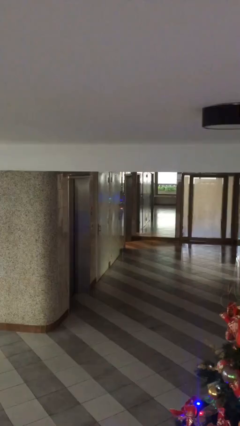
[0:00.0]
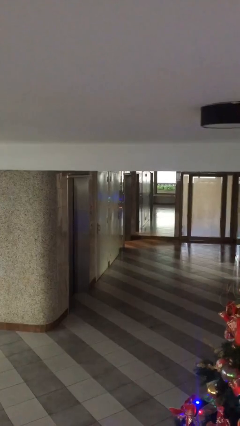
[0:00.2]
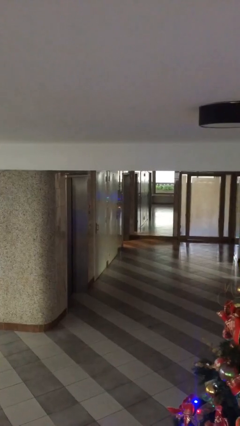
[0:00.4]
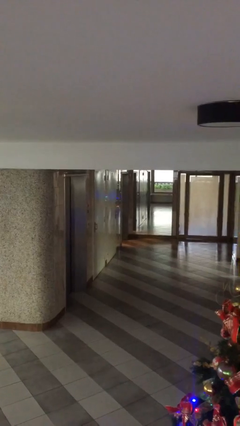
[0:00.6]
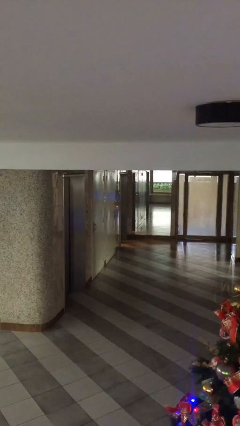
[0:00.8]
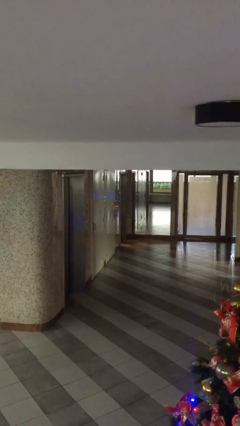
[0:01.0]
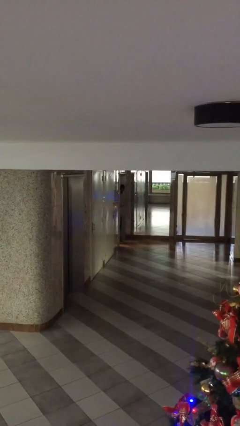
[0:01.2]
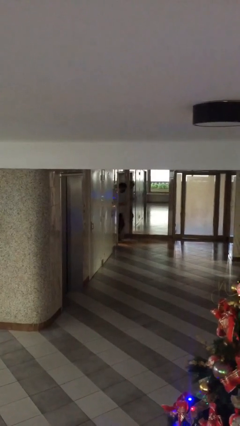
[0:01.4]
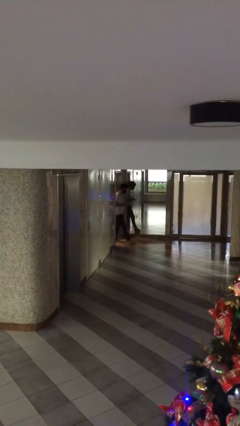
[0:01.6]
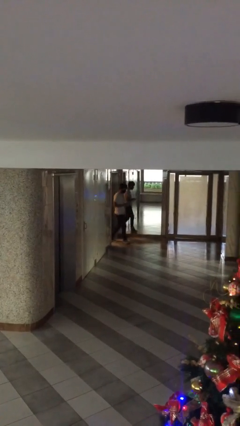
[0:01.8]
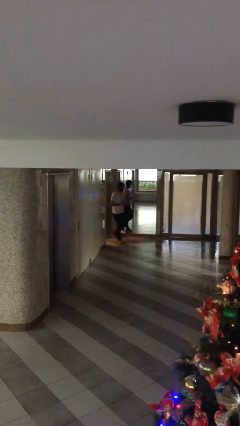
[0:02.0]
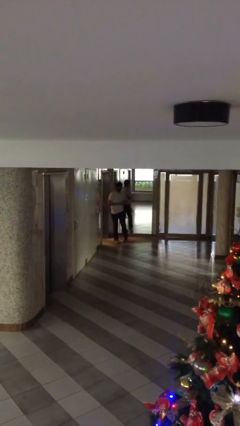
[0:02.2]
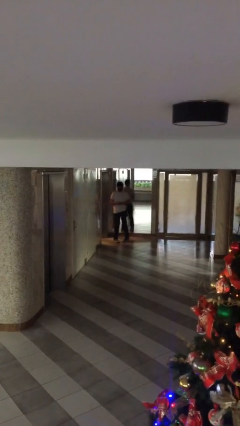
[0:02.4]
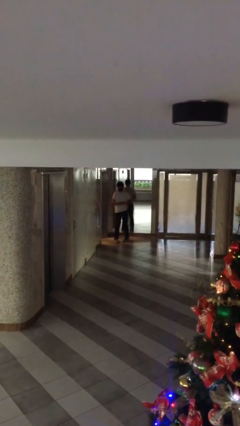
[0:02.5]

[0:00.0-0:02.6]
person enters scene through structure

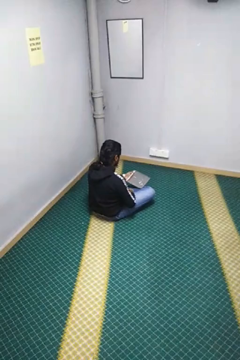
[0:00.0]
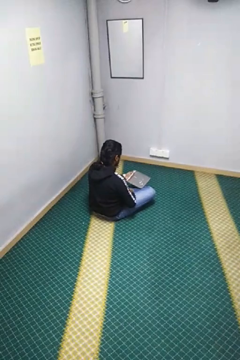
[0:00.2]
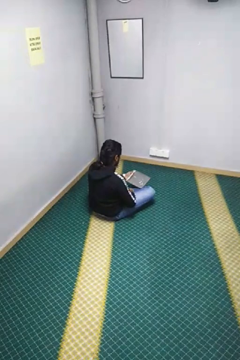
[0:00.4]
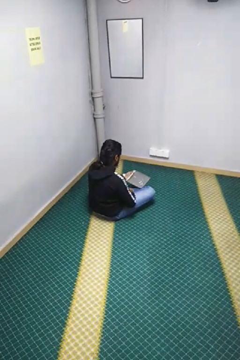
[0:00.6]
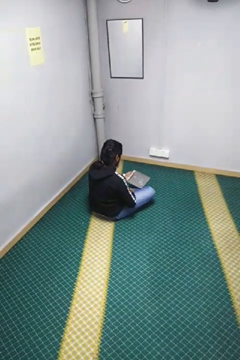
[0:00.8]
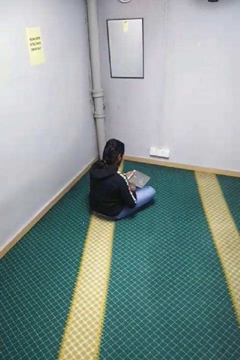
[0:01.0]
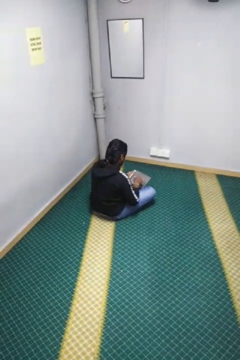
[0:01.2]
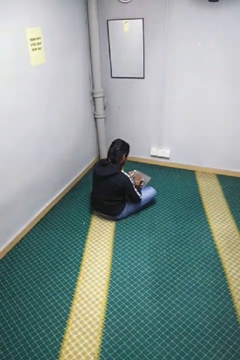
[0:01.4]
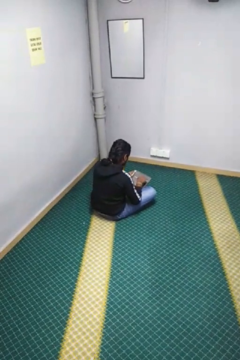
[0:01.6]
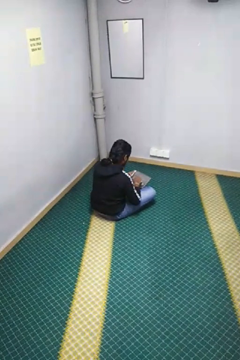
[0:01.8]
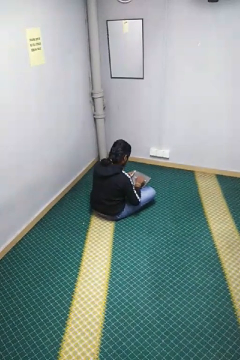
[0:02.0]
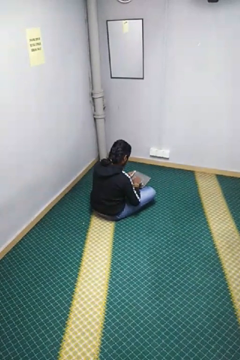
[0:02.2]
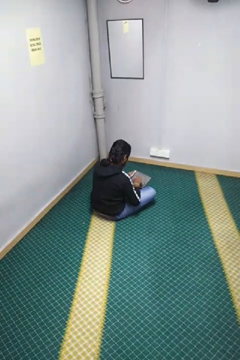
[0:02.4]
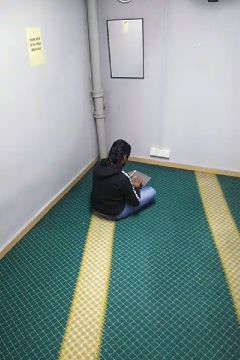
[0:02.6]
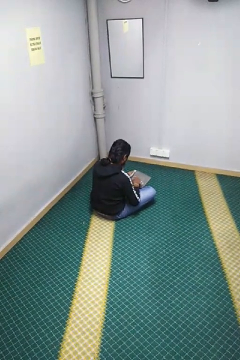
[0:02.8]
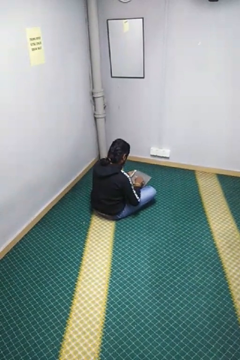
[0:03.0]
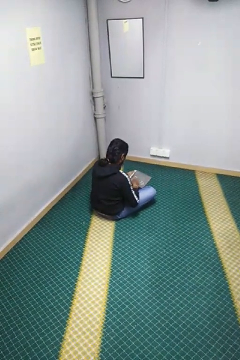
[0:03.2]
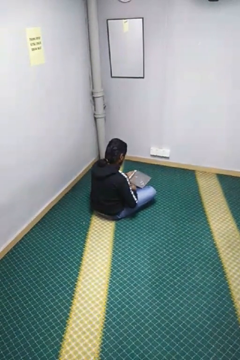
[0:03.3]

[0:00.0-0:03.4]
person interacts with tablet

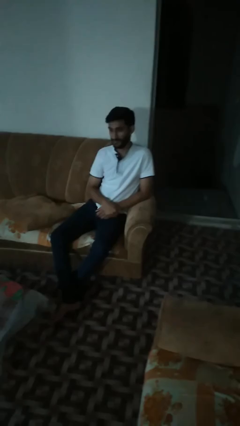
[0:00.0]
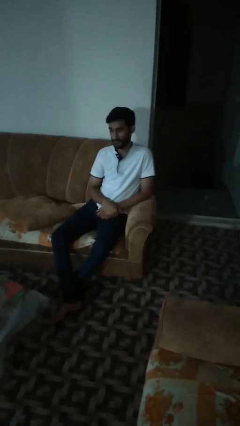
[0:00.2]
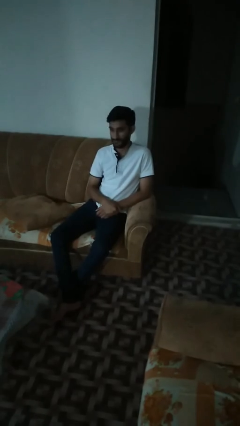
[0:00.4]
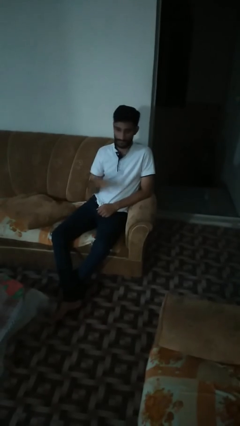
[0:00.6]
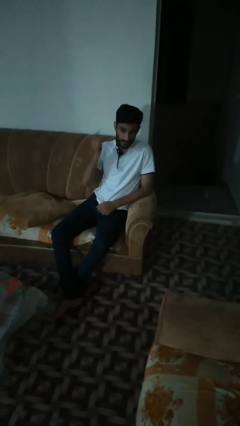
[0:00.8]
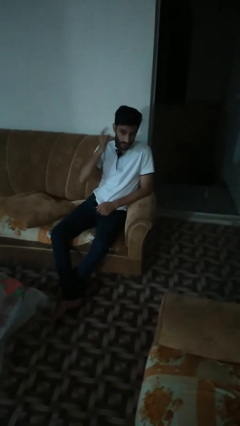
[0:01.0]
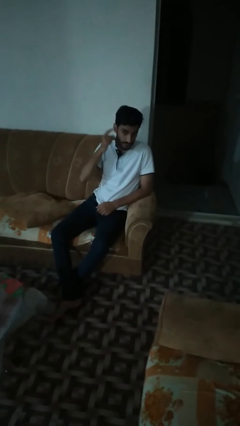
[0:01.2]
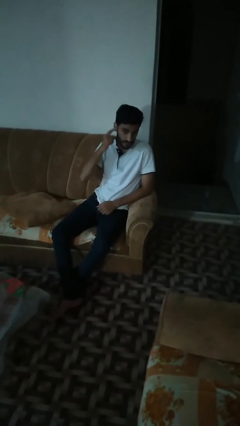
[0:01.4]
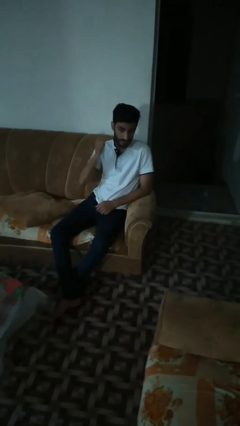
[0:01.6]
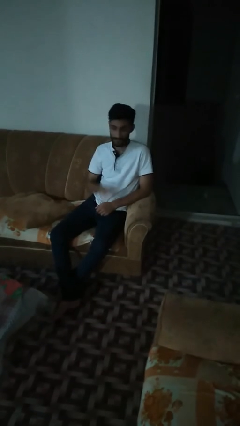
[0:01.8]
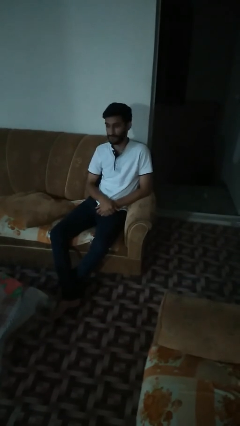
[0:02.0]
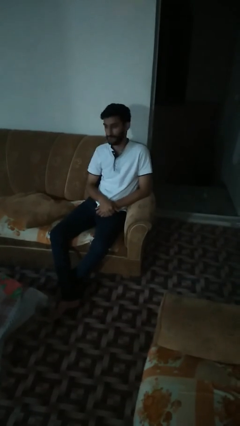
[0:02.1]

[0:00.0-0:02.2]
person gestures listen closely

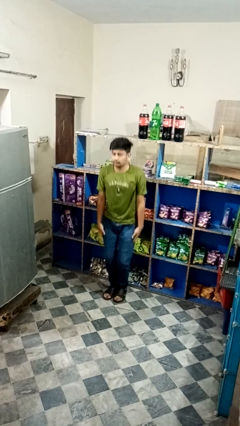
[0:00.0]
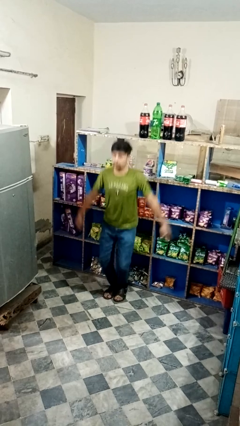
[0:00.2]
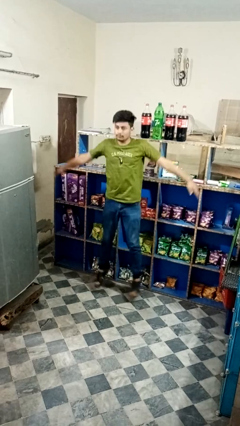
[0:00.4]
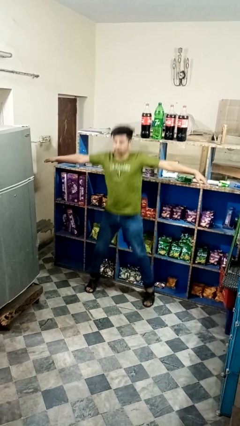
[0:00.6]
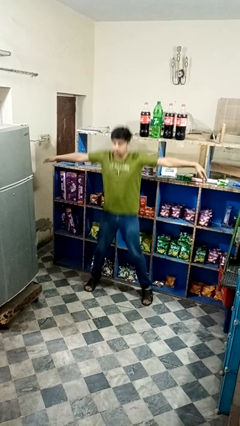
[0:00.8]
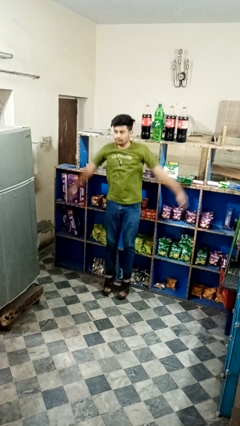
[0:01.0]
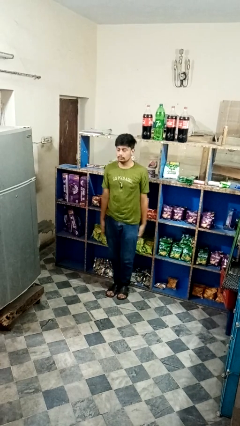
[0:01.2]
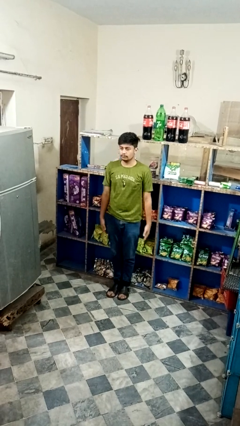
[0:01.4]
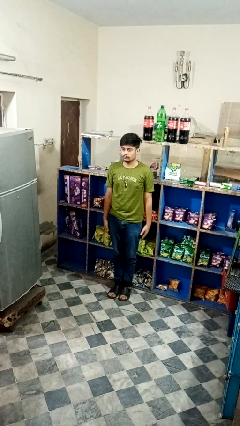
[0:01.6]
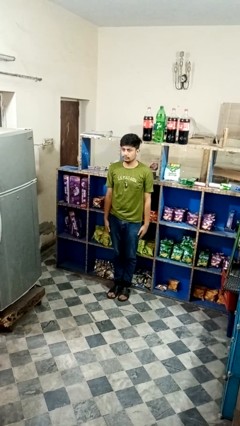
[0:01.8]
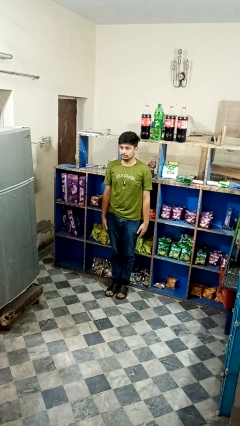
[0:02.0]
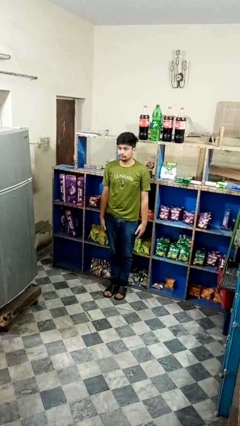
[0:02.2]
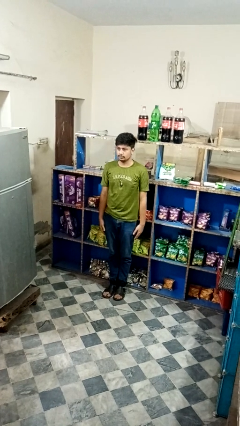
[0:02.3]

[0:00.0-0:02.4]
person exercises with jumping jacks

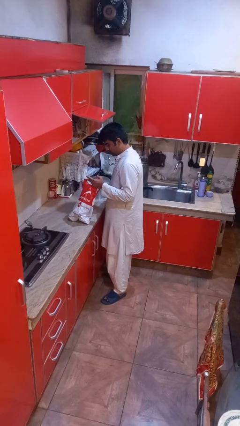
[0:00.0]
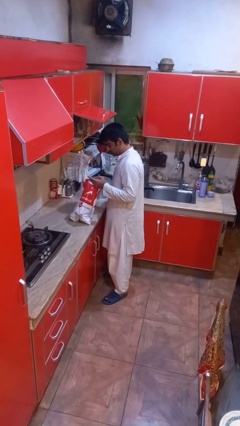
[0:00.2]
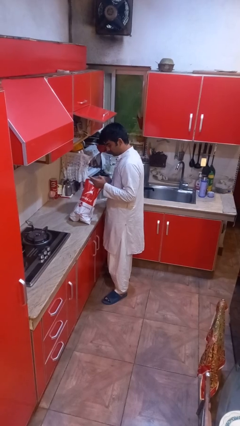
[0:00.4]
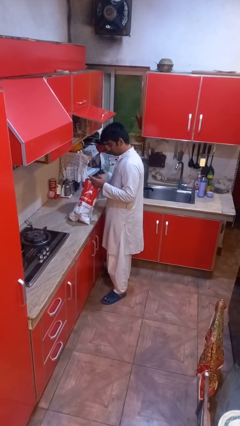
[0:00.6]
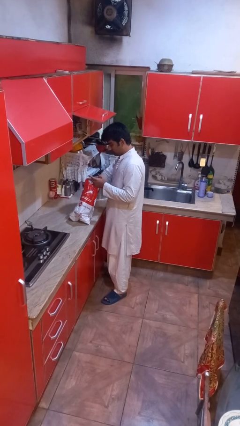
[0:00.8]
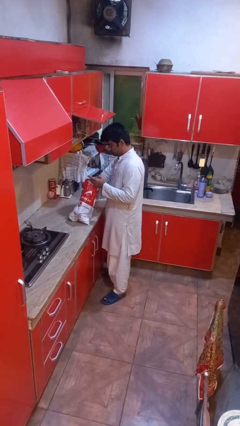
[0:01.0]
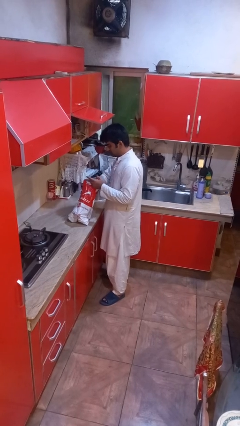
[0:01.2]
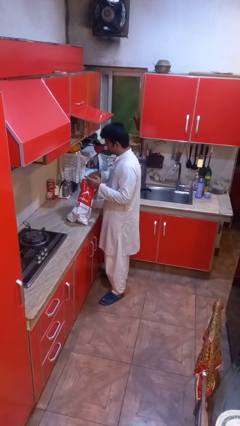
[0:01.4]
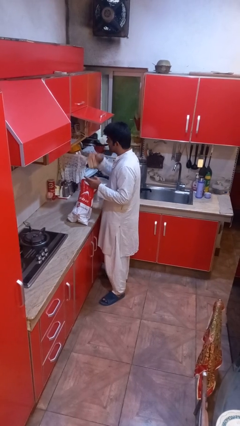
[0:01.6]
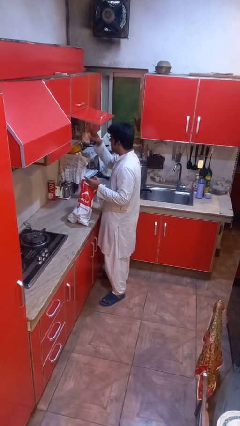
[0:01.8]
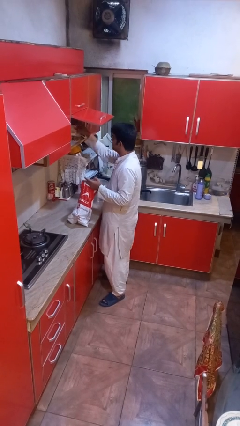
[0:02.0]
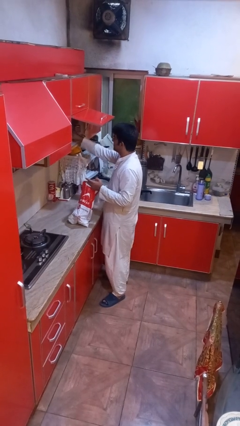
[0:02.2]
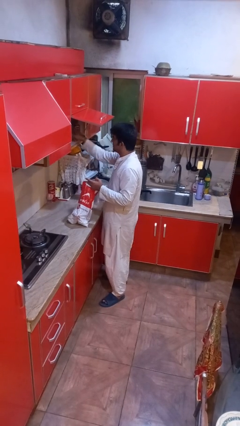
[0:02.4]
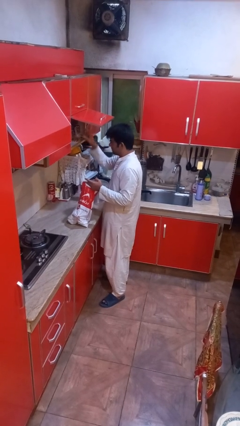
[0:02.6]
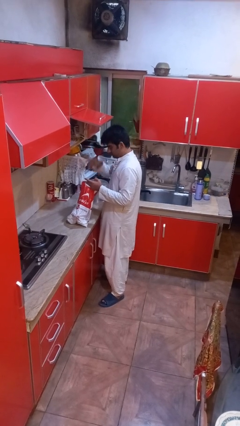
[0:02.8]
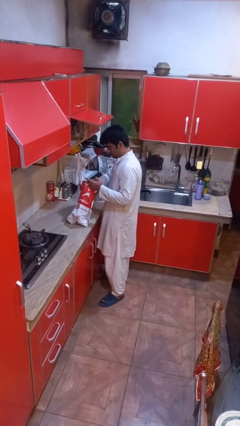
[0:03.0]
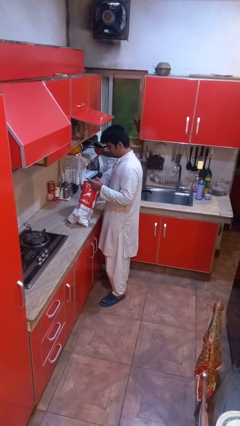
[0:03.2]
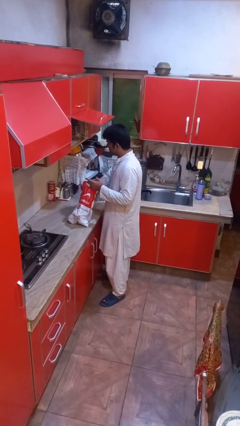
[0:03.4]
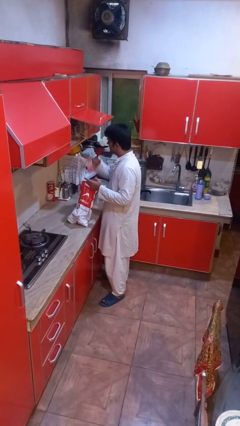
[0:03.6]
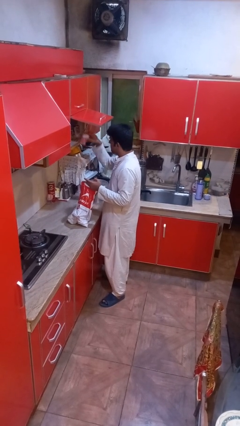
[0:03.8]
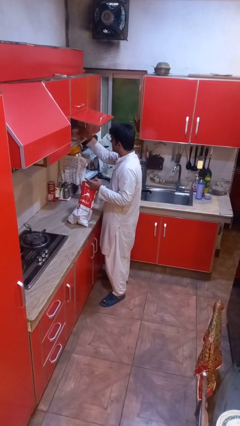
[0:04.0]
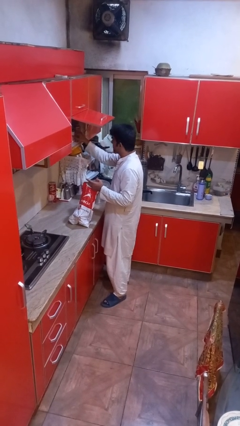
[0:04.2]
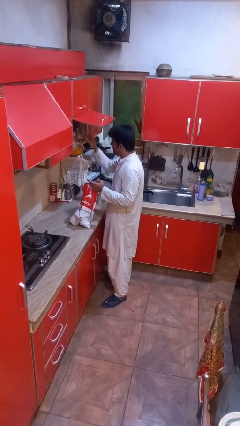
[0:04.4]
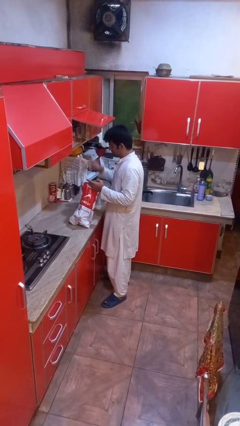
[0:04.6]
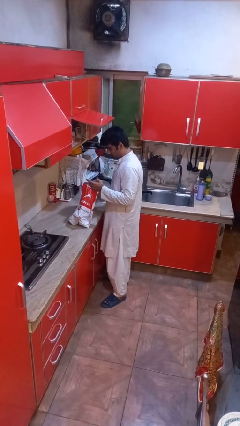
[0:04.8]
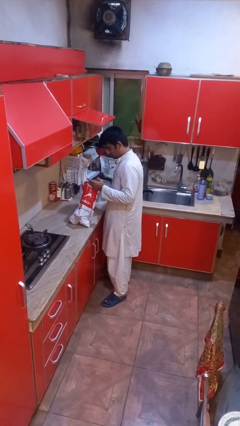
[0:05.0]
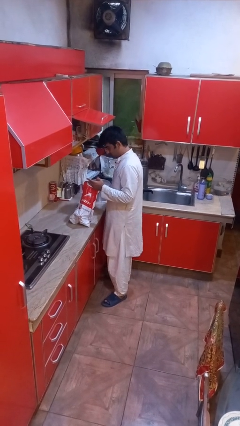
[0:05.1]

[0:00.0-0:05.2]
person loads groceries into cabinet

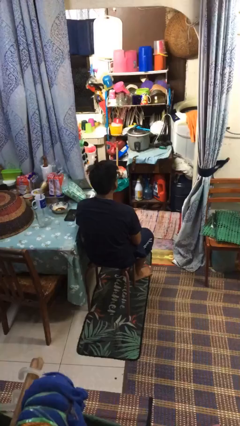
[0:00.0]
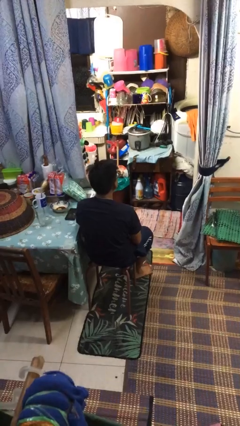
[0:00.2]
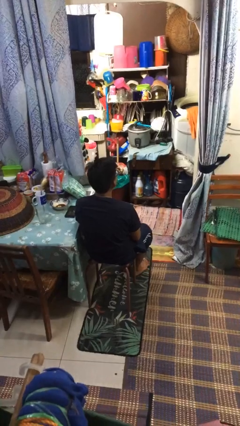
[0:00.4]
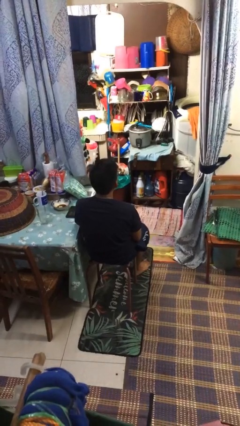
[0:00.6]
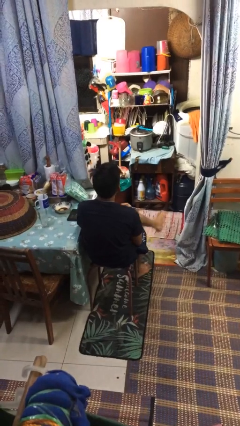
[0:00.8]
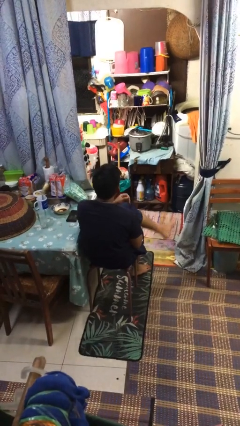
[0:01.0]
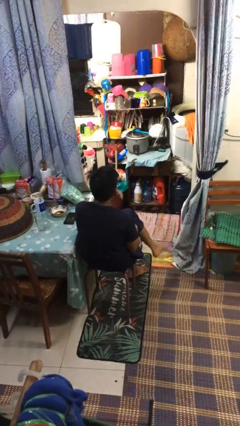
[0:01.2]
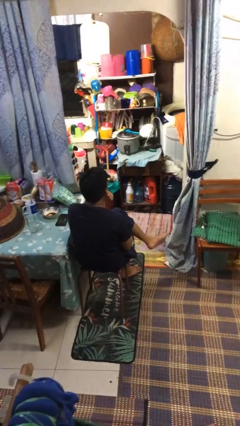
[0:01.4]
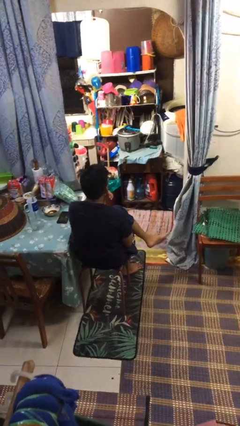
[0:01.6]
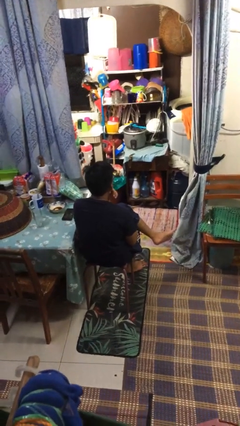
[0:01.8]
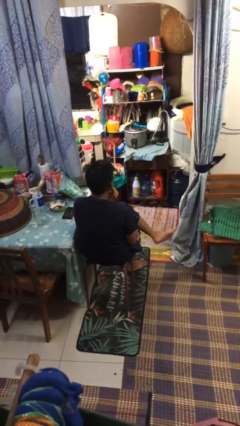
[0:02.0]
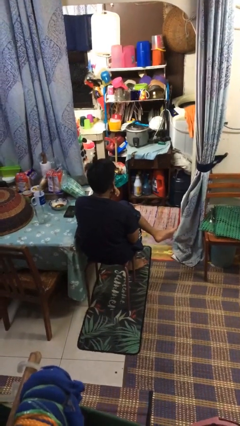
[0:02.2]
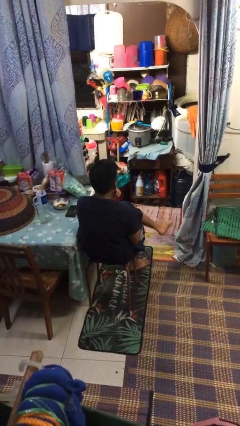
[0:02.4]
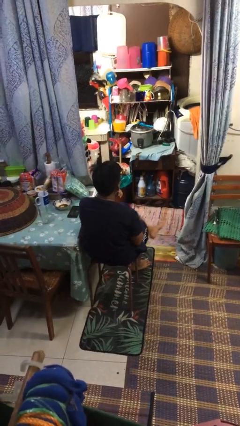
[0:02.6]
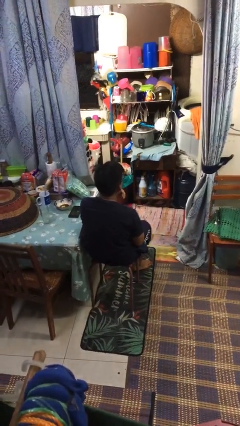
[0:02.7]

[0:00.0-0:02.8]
person crosses legs
